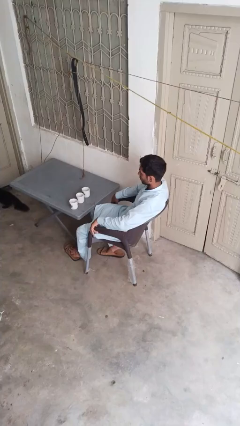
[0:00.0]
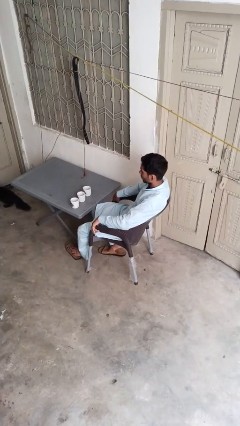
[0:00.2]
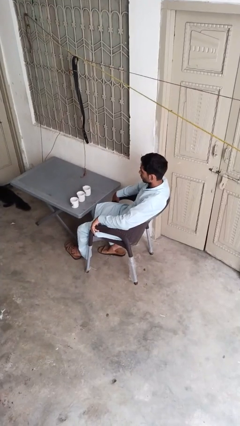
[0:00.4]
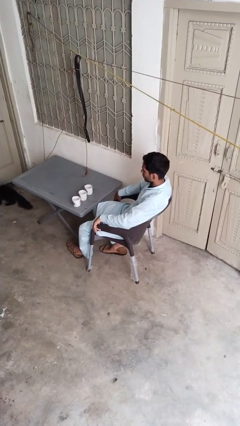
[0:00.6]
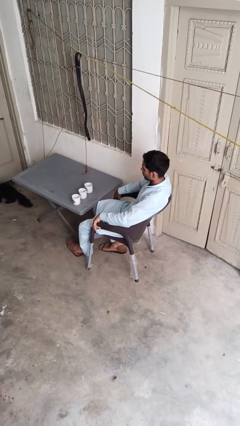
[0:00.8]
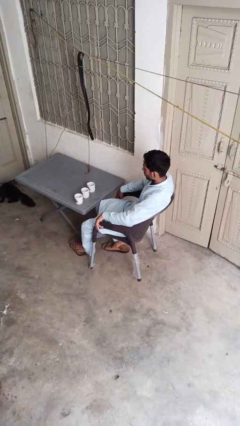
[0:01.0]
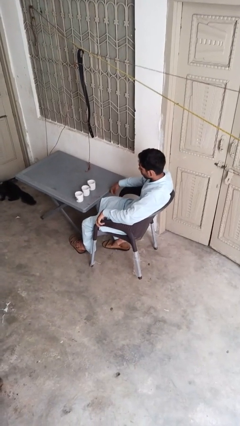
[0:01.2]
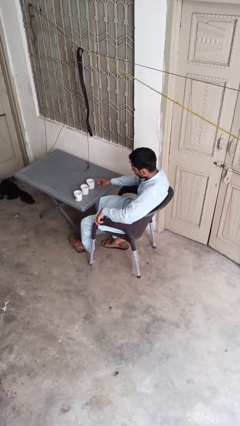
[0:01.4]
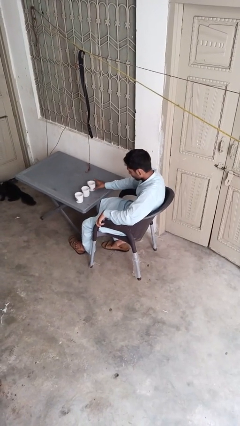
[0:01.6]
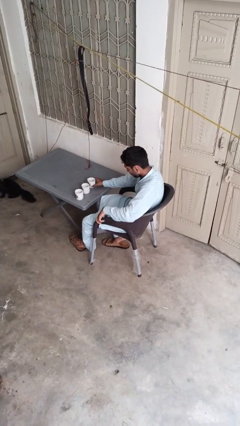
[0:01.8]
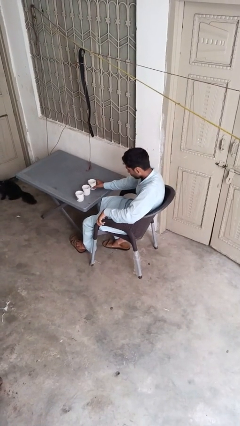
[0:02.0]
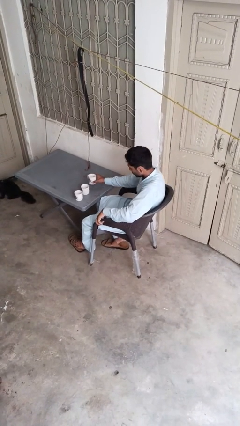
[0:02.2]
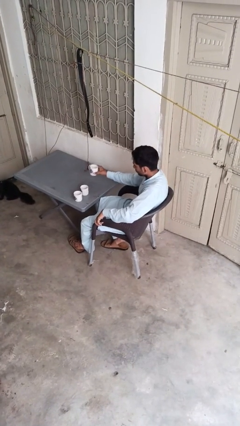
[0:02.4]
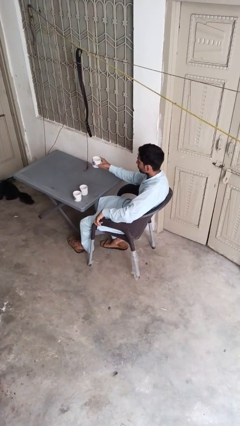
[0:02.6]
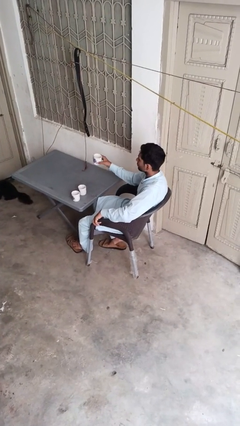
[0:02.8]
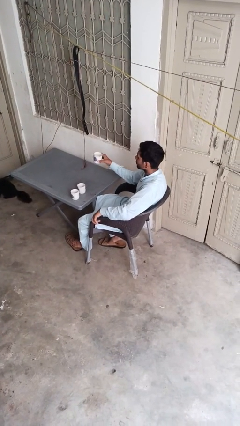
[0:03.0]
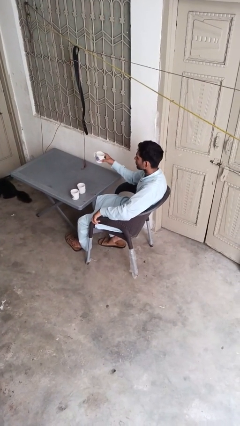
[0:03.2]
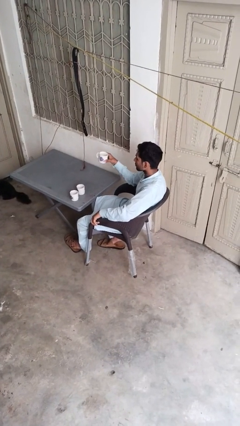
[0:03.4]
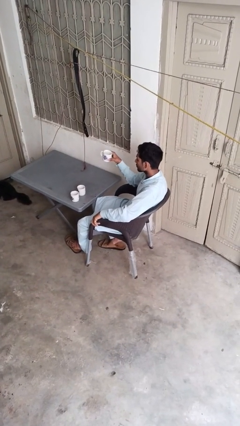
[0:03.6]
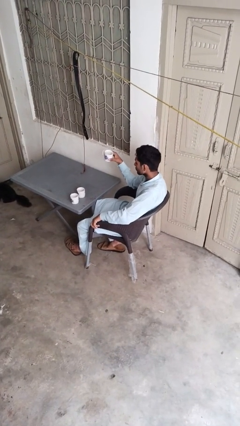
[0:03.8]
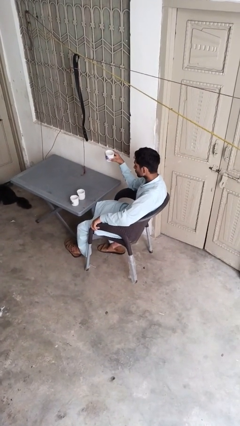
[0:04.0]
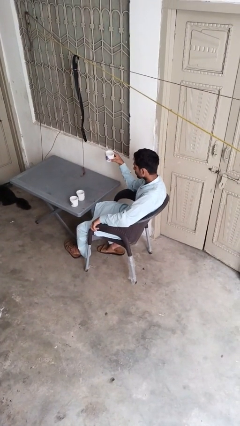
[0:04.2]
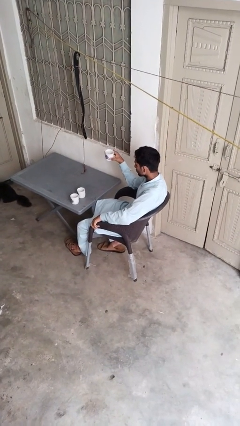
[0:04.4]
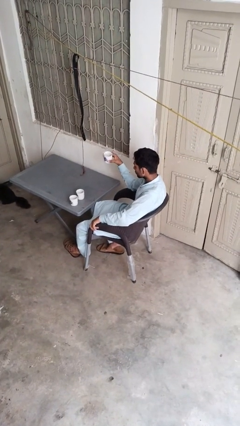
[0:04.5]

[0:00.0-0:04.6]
person picks up object from table

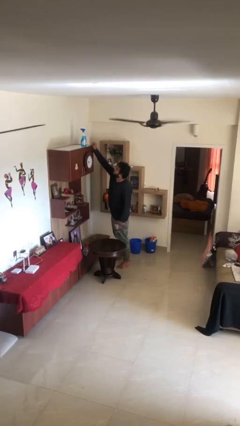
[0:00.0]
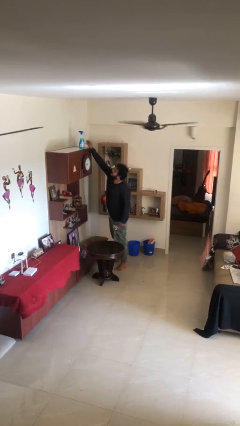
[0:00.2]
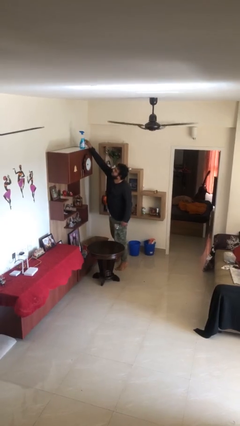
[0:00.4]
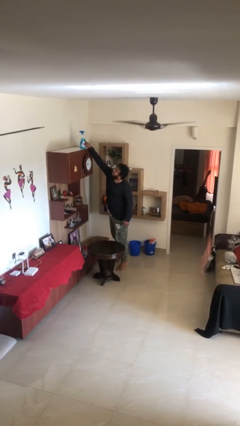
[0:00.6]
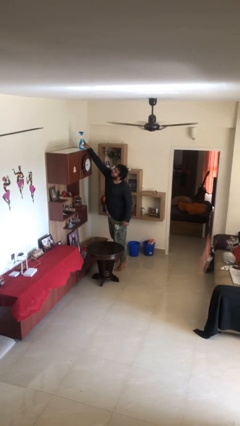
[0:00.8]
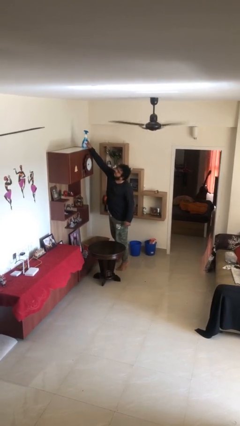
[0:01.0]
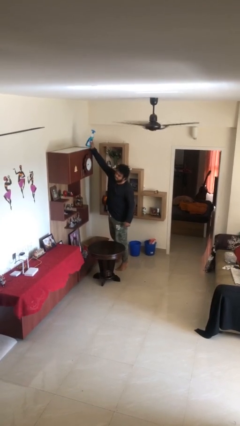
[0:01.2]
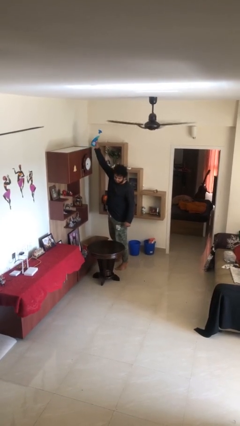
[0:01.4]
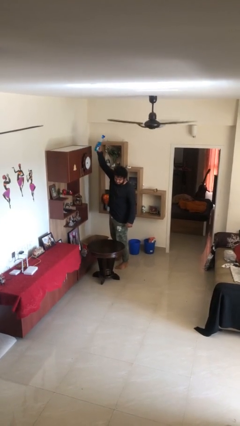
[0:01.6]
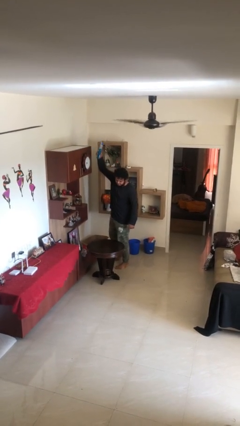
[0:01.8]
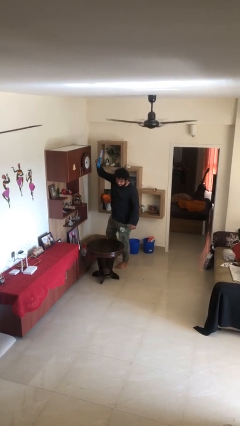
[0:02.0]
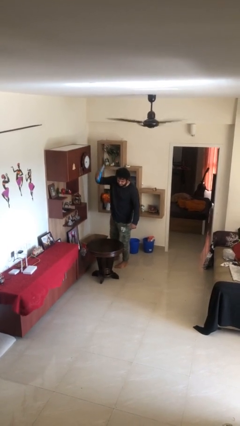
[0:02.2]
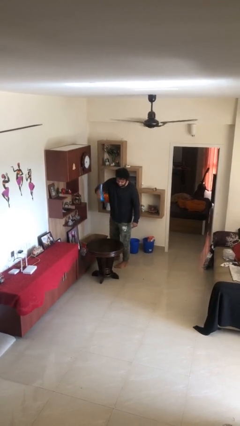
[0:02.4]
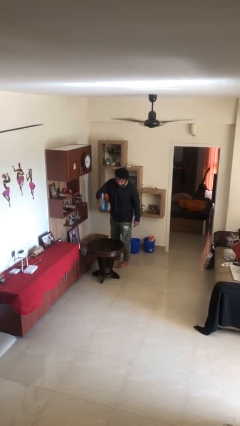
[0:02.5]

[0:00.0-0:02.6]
person picks up object from shelf

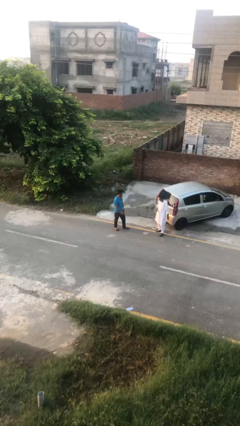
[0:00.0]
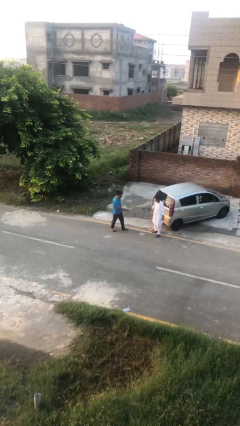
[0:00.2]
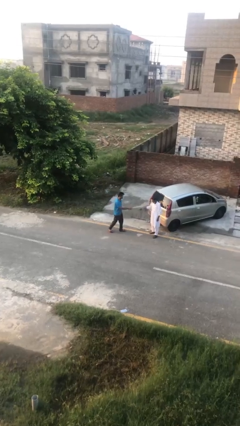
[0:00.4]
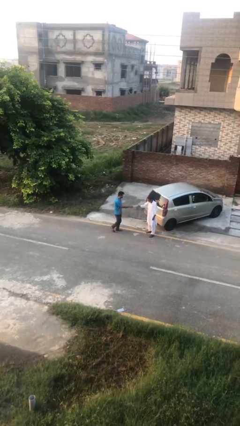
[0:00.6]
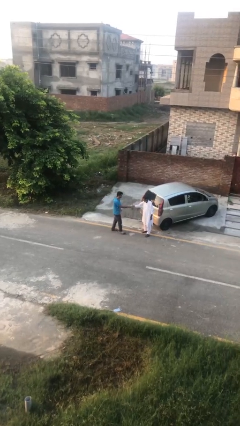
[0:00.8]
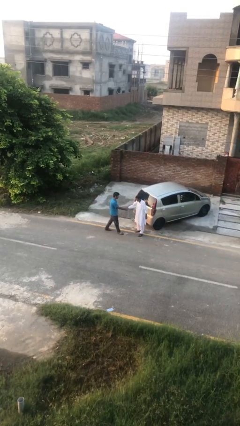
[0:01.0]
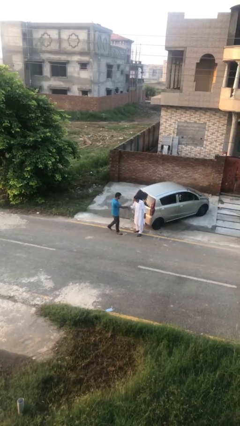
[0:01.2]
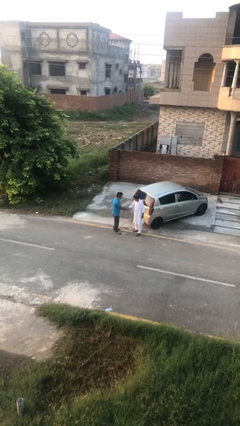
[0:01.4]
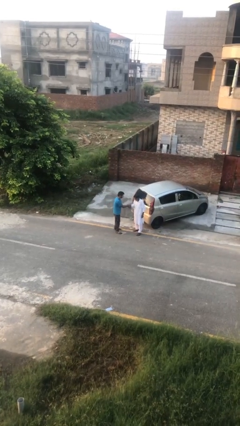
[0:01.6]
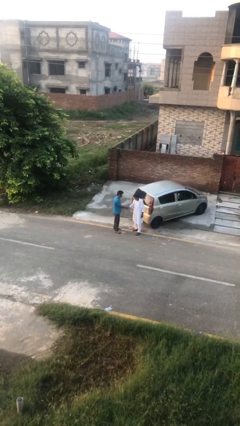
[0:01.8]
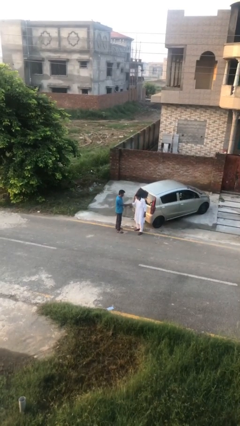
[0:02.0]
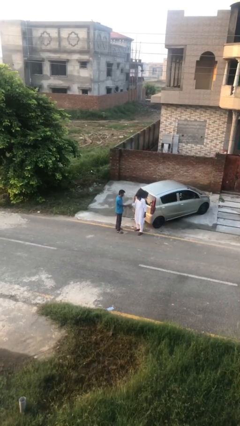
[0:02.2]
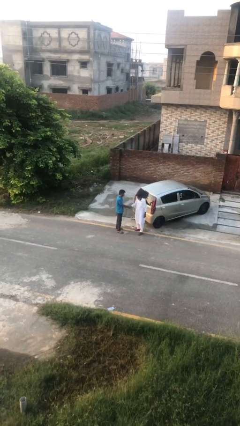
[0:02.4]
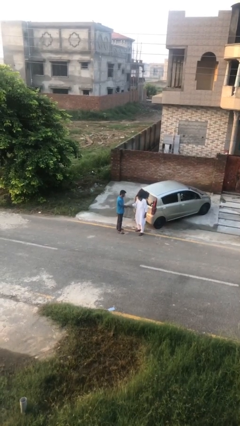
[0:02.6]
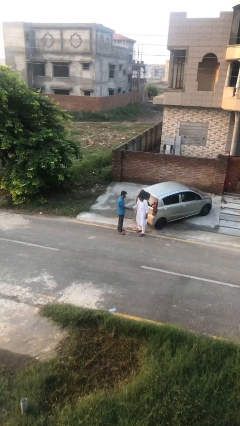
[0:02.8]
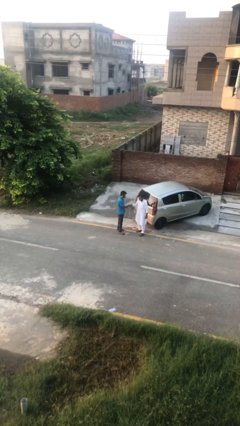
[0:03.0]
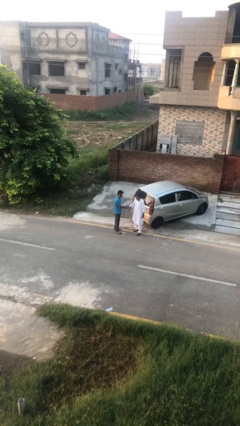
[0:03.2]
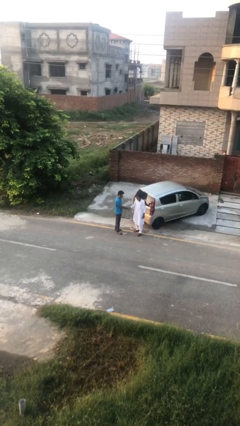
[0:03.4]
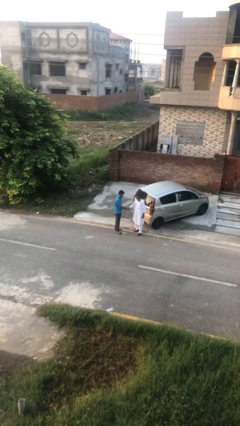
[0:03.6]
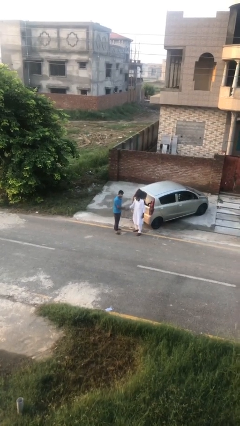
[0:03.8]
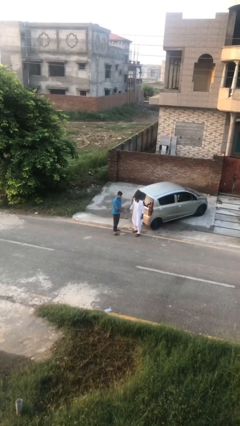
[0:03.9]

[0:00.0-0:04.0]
person shakes hand

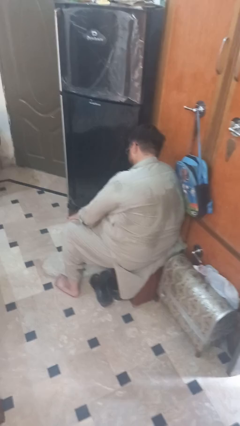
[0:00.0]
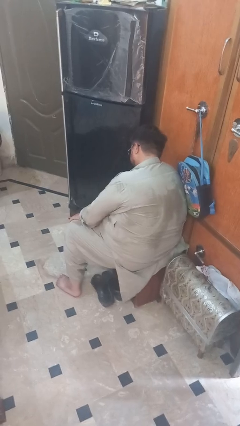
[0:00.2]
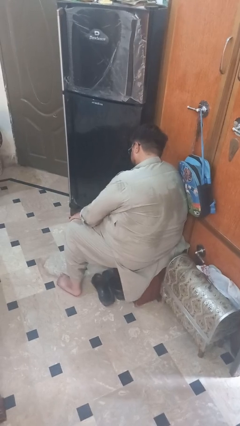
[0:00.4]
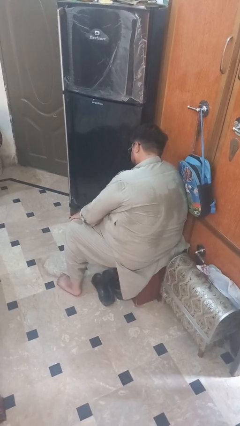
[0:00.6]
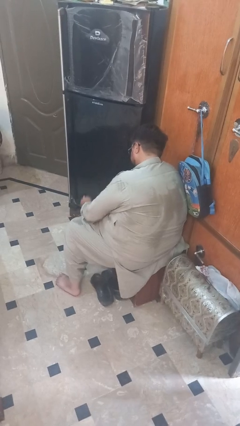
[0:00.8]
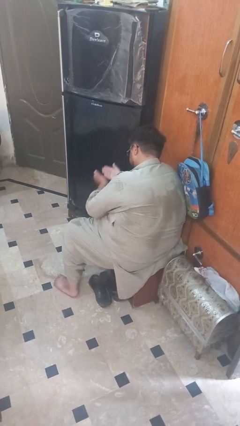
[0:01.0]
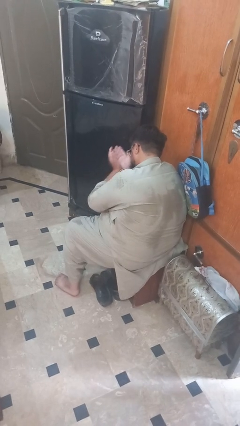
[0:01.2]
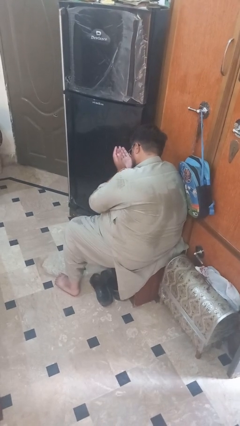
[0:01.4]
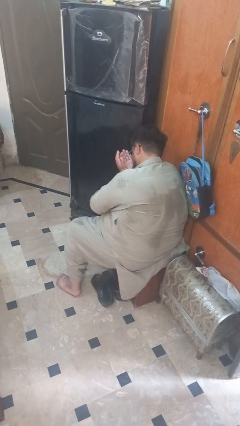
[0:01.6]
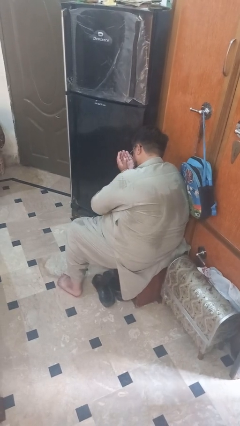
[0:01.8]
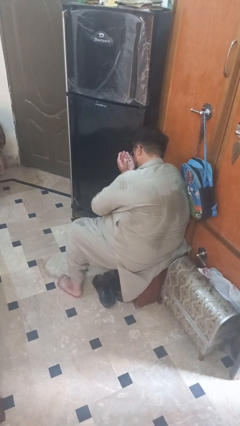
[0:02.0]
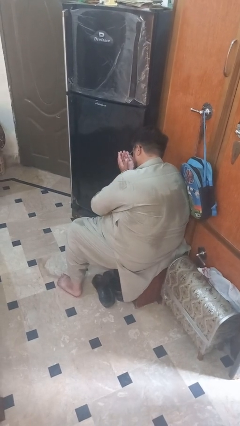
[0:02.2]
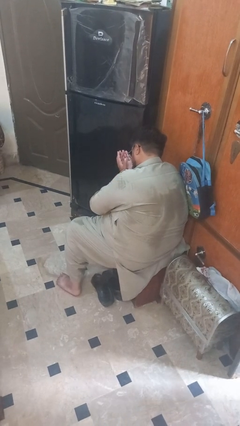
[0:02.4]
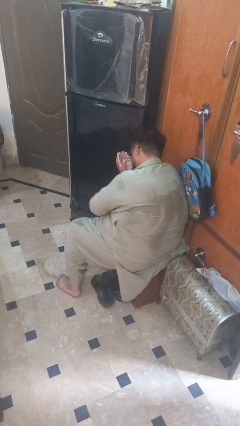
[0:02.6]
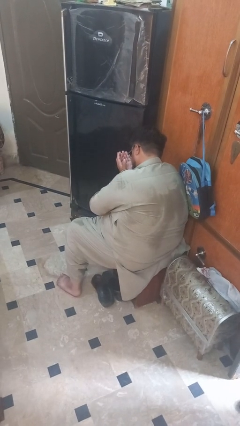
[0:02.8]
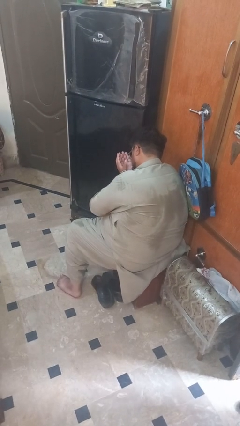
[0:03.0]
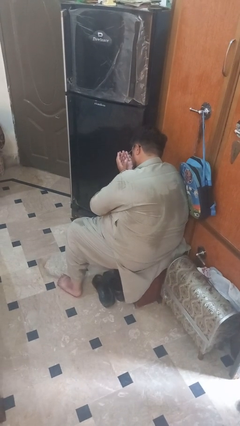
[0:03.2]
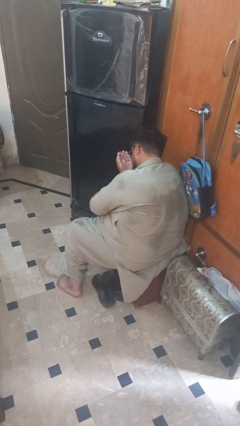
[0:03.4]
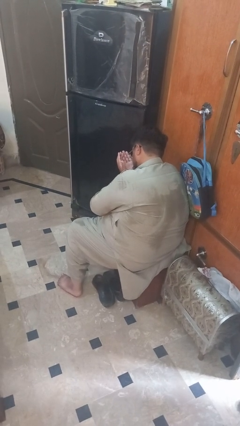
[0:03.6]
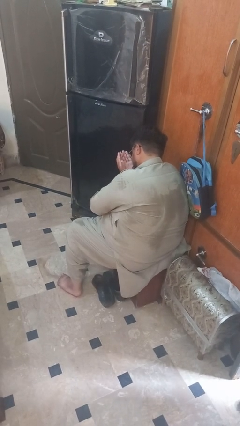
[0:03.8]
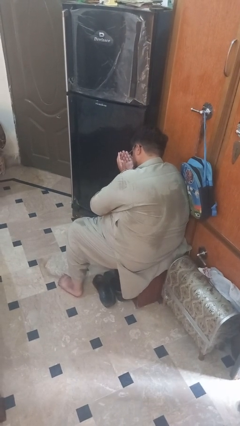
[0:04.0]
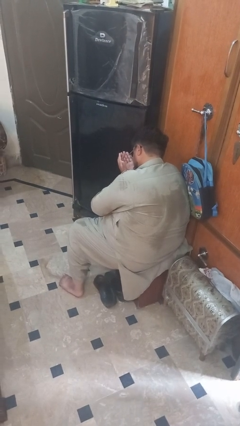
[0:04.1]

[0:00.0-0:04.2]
person prays

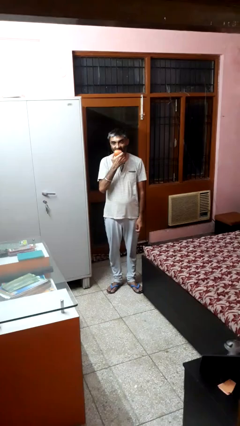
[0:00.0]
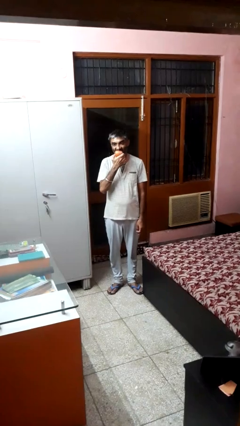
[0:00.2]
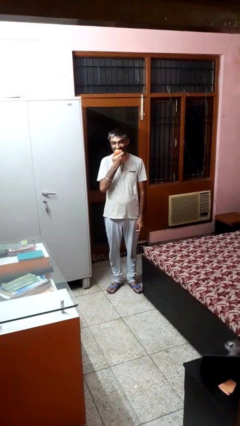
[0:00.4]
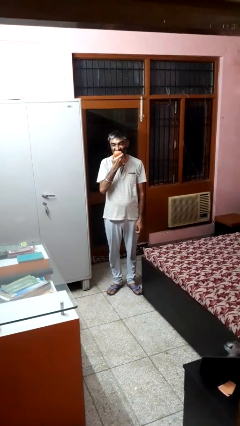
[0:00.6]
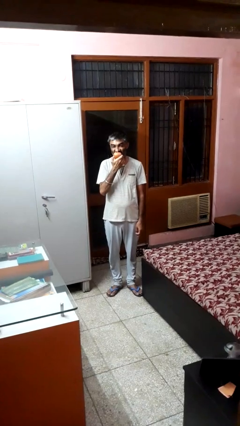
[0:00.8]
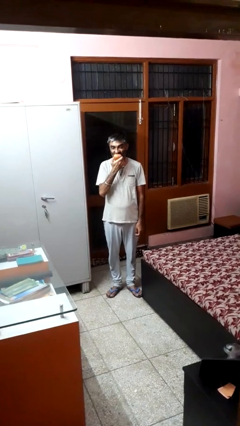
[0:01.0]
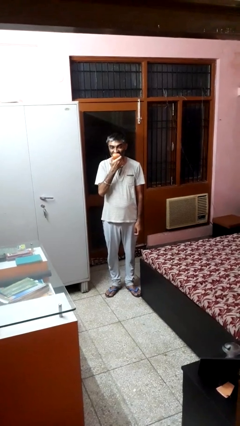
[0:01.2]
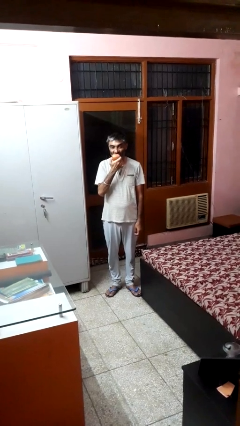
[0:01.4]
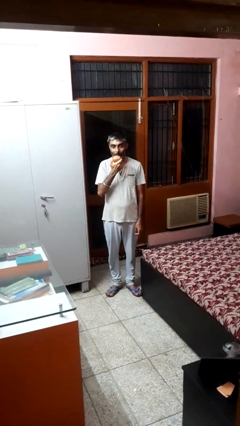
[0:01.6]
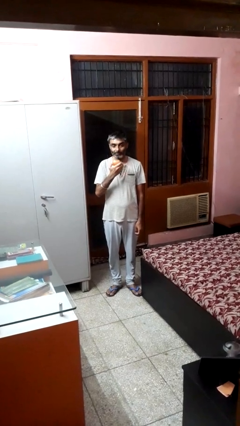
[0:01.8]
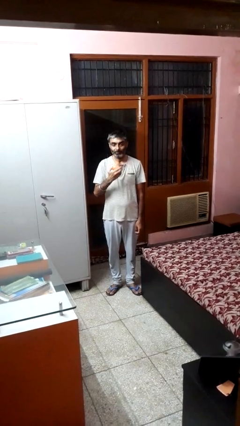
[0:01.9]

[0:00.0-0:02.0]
person eats apple

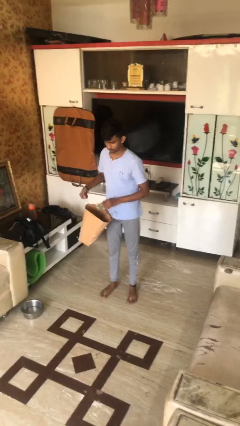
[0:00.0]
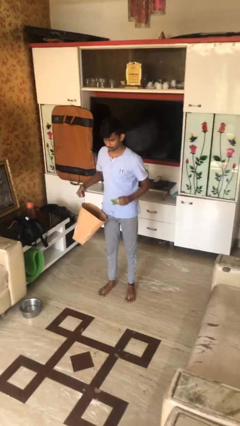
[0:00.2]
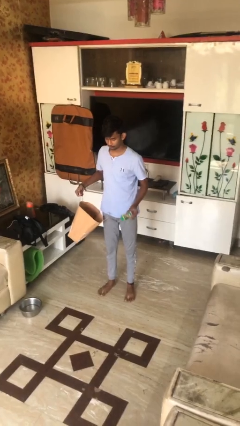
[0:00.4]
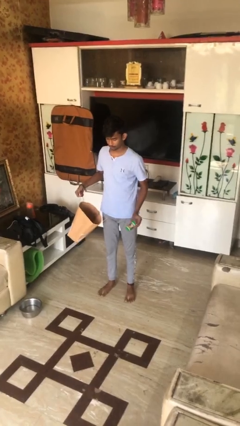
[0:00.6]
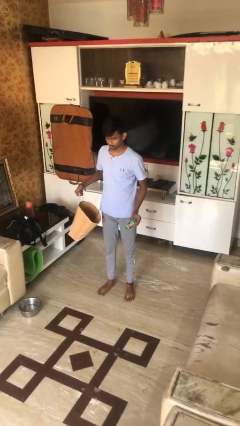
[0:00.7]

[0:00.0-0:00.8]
person takes object from bag
